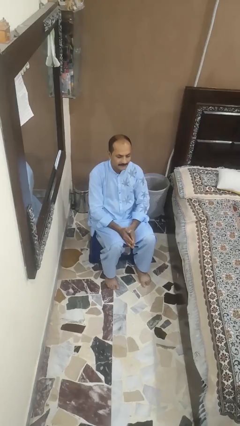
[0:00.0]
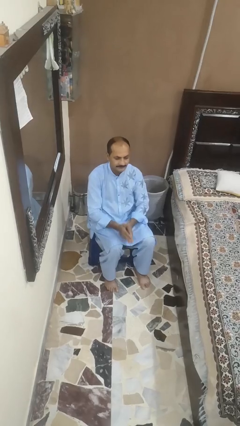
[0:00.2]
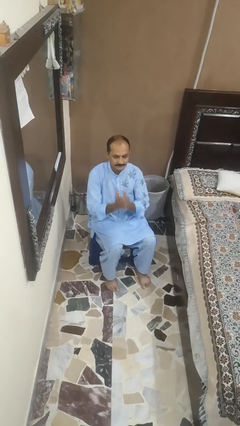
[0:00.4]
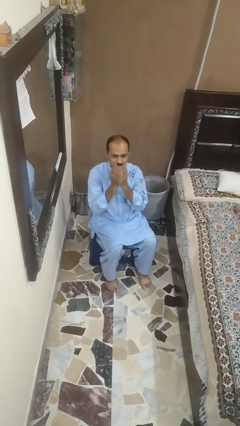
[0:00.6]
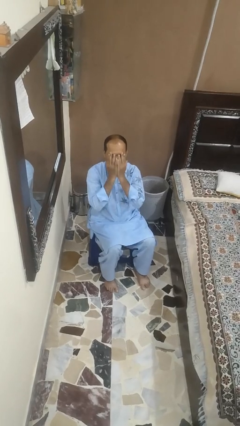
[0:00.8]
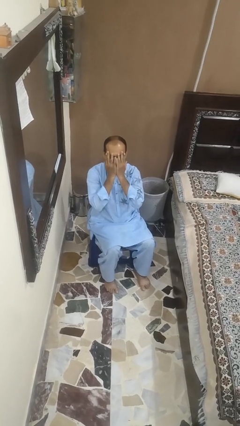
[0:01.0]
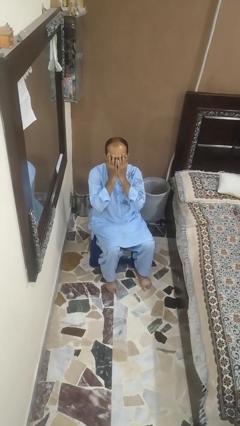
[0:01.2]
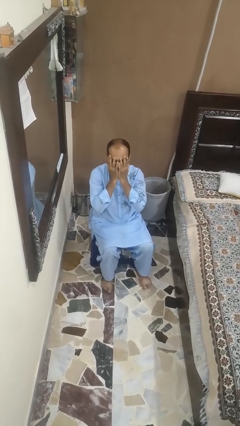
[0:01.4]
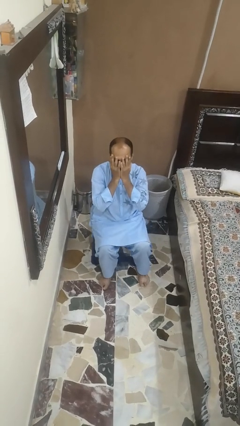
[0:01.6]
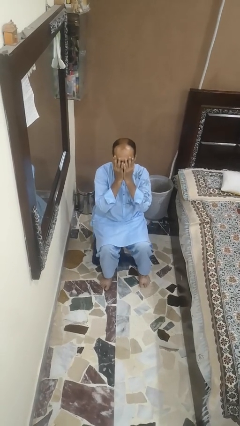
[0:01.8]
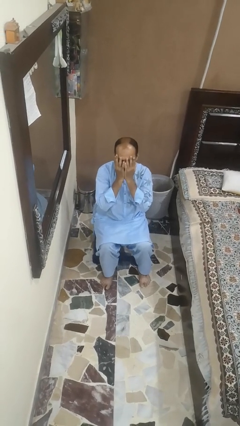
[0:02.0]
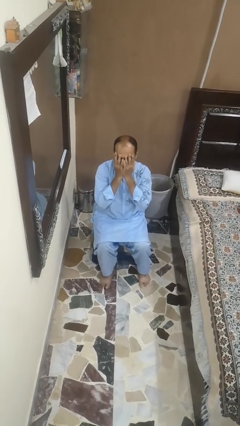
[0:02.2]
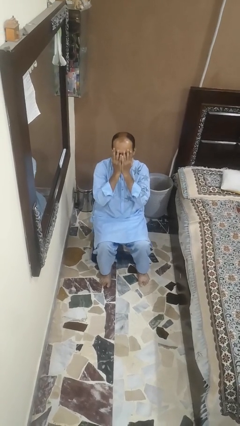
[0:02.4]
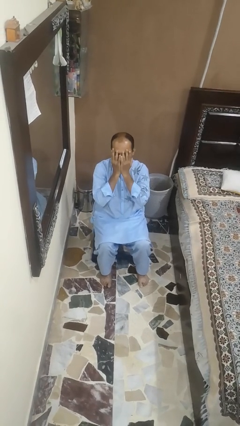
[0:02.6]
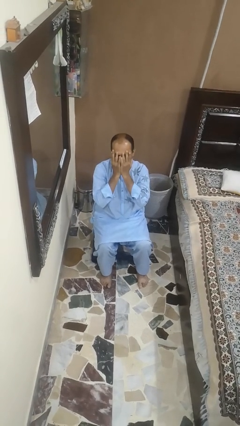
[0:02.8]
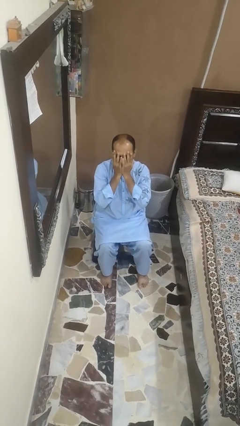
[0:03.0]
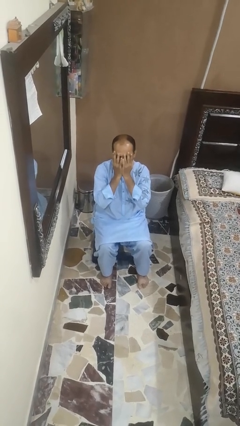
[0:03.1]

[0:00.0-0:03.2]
person covers face with hands

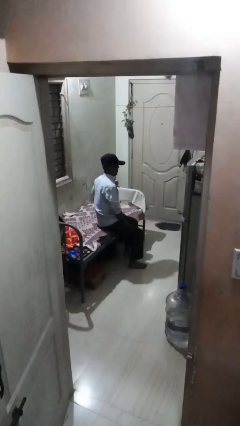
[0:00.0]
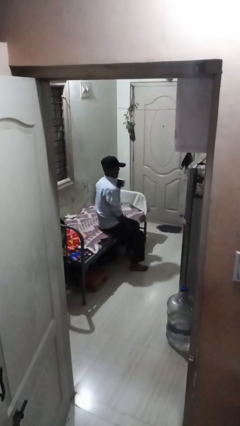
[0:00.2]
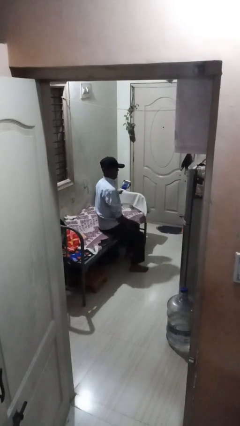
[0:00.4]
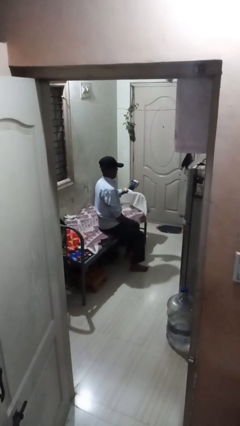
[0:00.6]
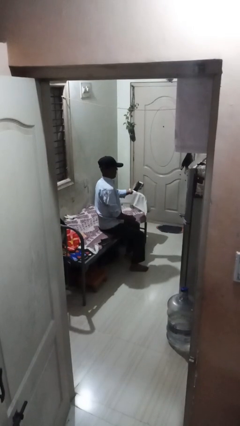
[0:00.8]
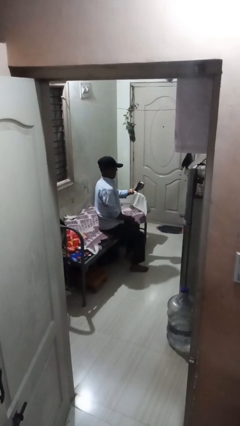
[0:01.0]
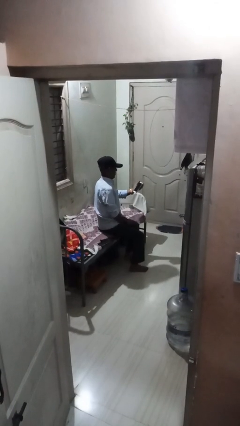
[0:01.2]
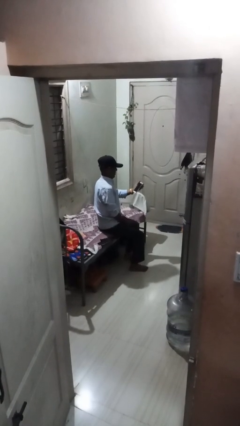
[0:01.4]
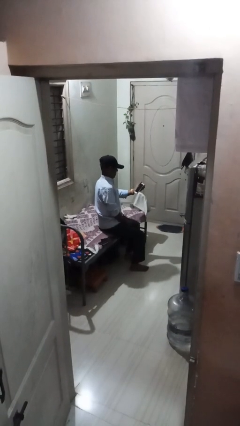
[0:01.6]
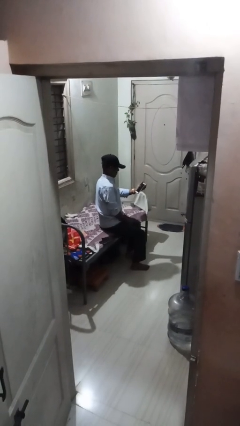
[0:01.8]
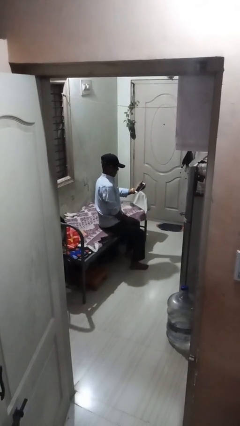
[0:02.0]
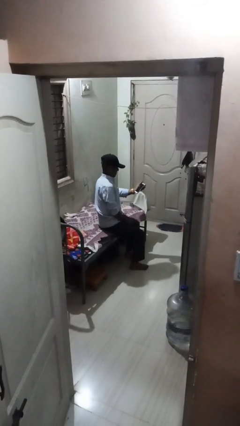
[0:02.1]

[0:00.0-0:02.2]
person takes phone from pocket

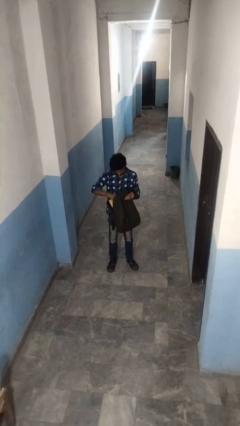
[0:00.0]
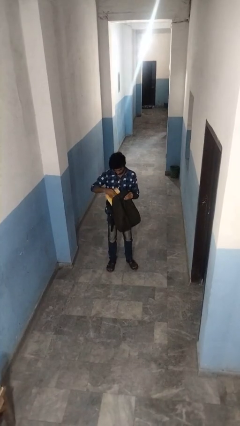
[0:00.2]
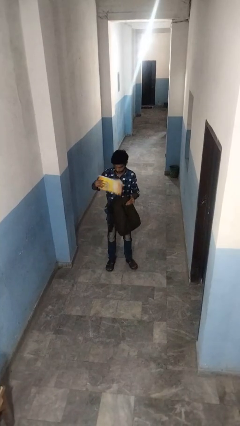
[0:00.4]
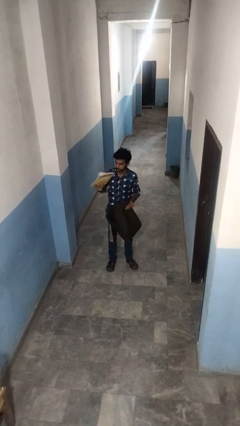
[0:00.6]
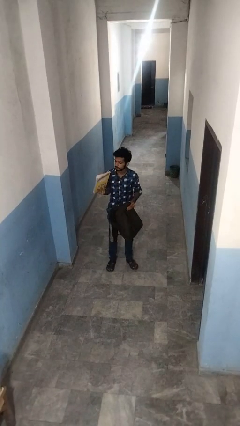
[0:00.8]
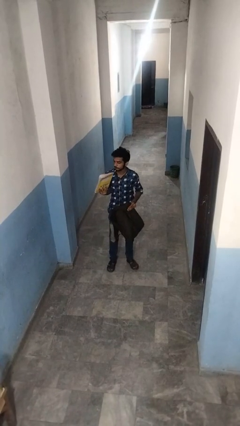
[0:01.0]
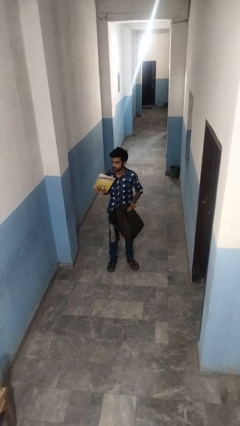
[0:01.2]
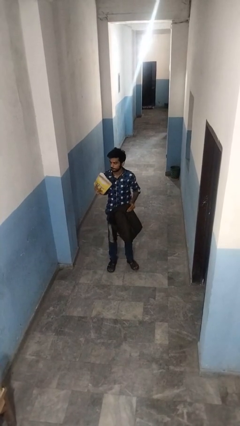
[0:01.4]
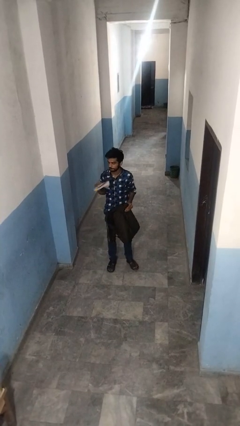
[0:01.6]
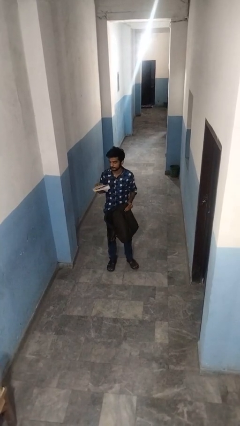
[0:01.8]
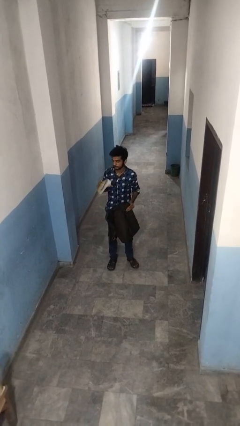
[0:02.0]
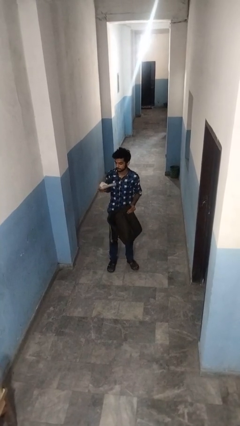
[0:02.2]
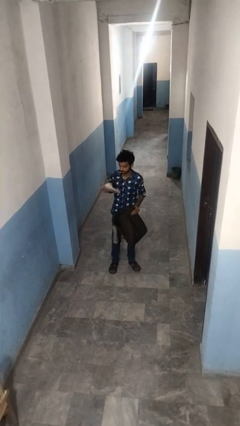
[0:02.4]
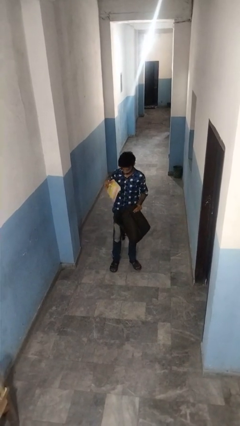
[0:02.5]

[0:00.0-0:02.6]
person takes object from backpack

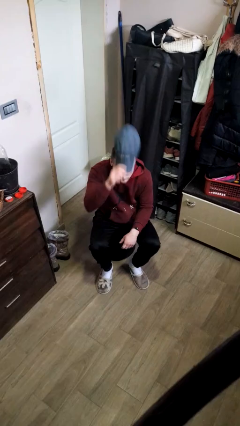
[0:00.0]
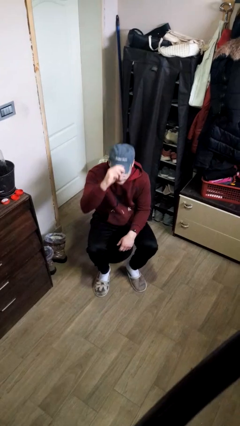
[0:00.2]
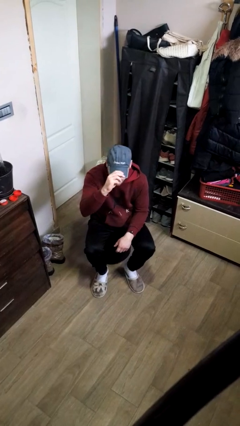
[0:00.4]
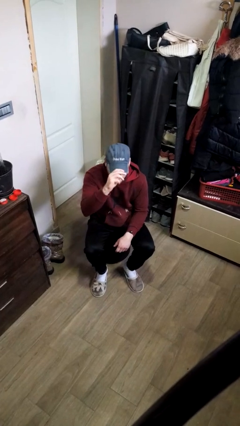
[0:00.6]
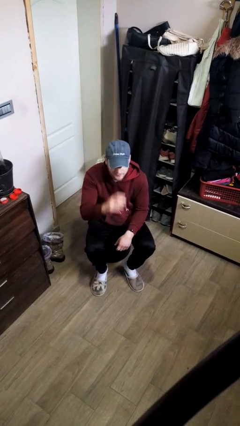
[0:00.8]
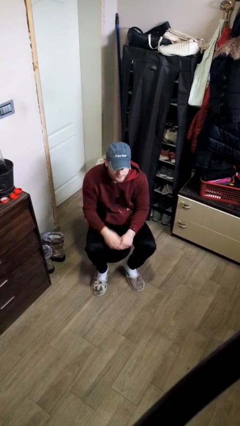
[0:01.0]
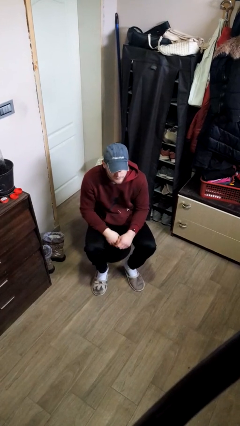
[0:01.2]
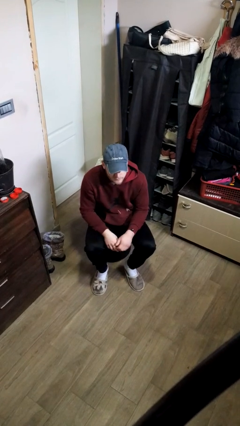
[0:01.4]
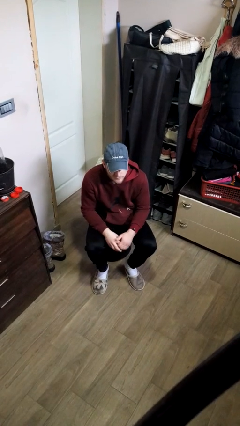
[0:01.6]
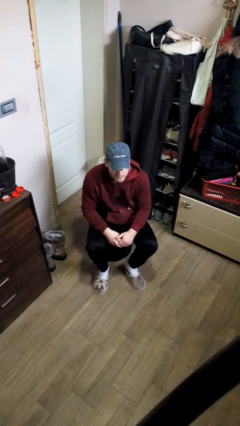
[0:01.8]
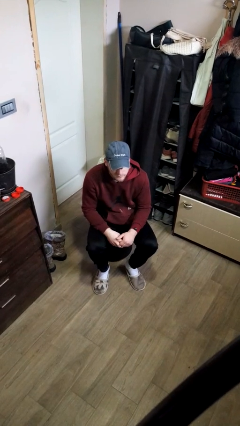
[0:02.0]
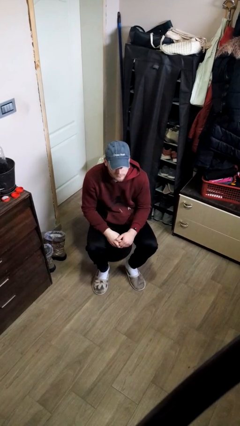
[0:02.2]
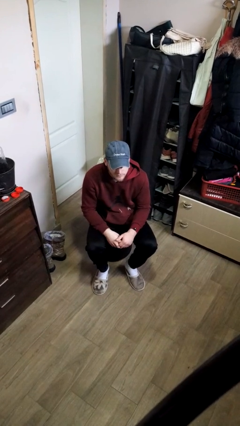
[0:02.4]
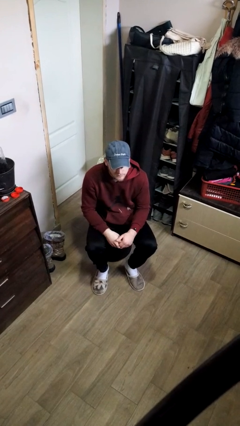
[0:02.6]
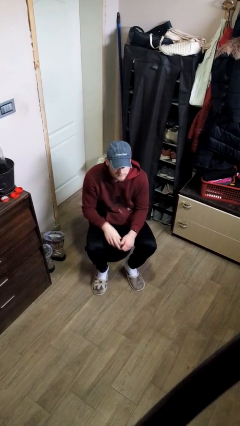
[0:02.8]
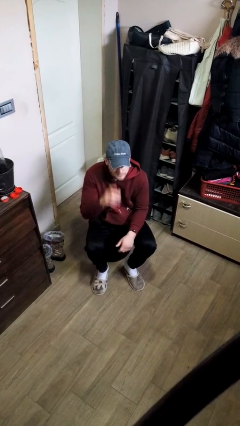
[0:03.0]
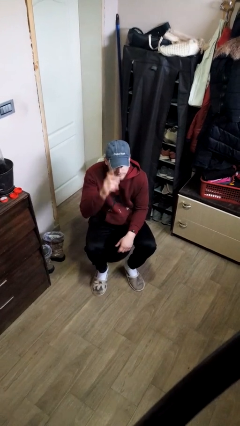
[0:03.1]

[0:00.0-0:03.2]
person puts on hat

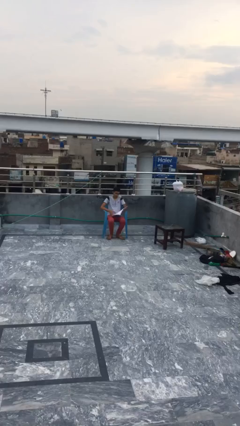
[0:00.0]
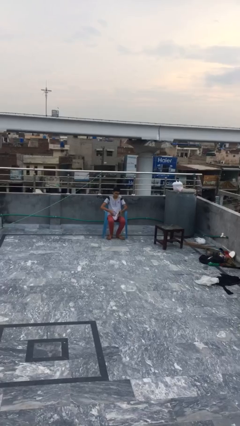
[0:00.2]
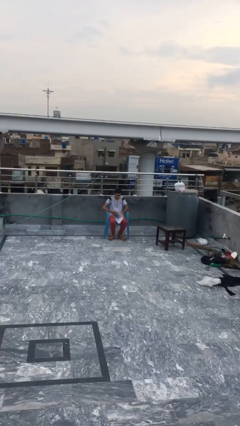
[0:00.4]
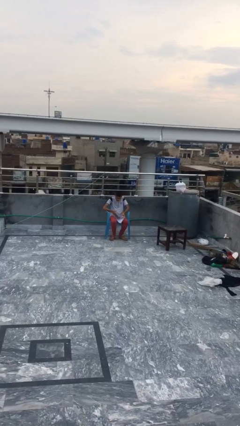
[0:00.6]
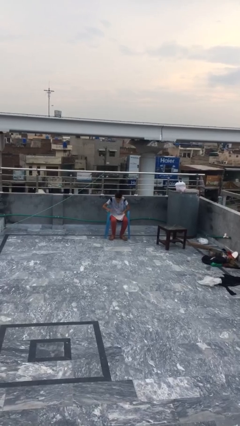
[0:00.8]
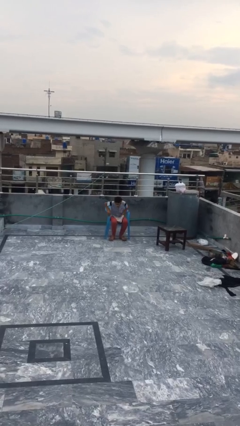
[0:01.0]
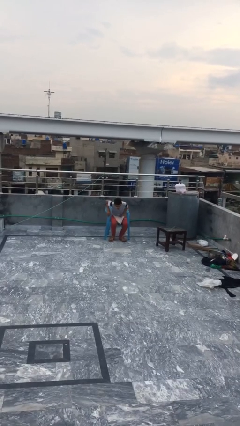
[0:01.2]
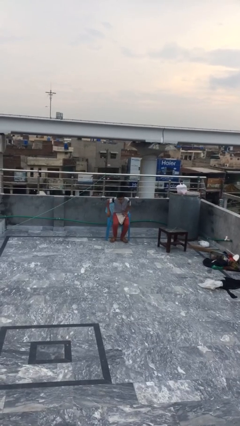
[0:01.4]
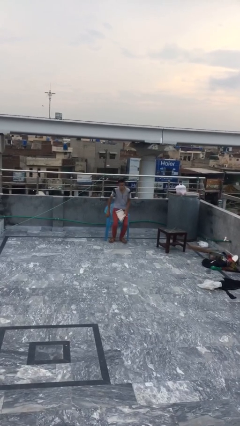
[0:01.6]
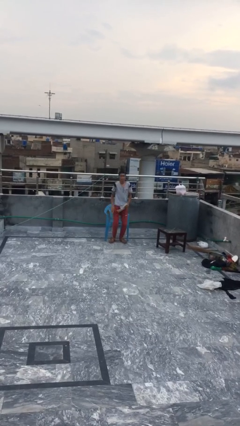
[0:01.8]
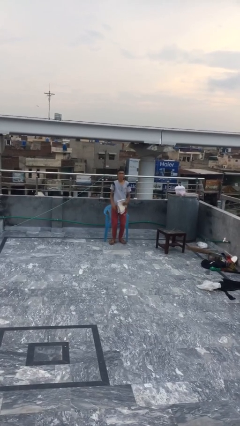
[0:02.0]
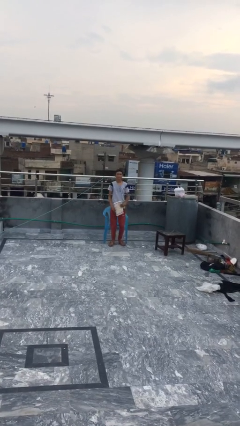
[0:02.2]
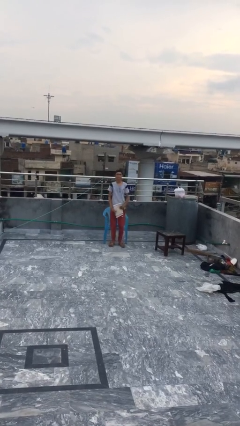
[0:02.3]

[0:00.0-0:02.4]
person stands up

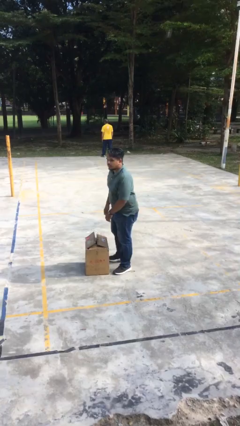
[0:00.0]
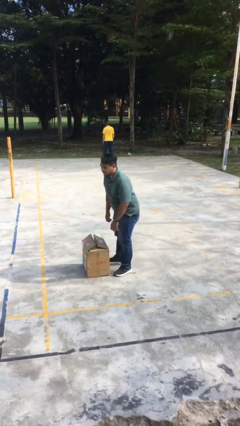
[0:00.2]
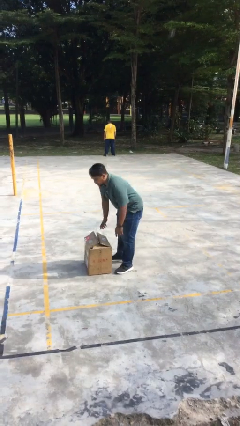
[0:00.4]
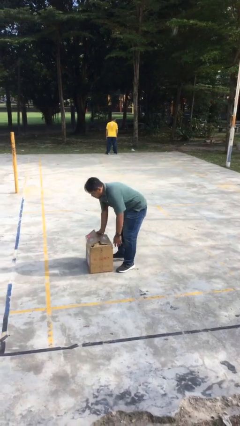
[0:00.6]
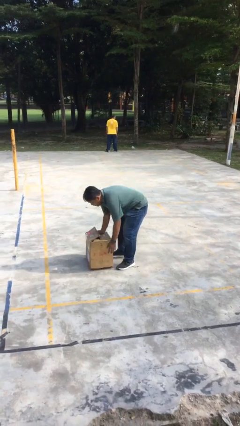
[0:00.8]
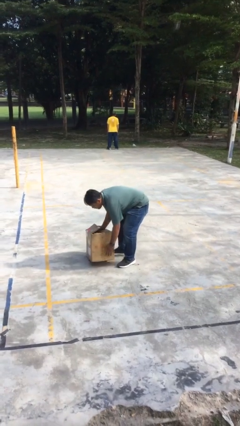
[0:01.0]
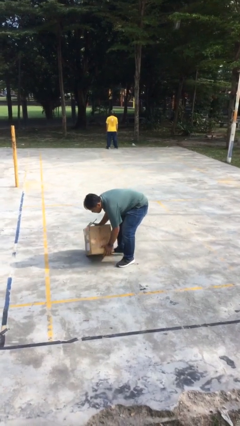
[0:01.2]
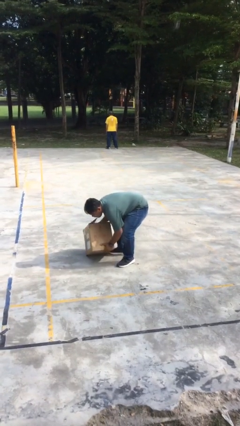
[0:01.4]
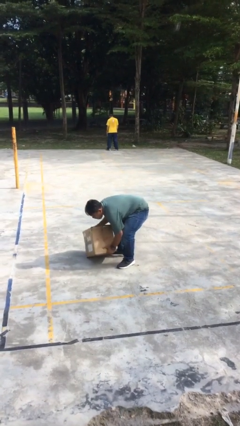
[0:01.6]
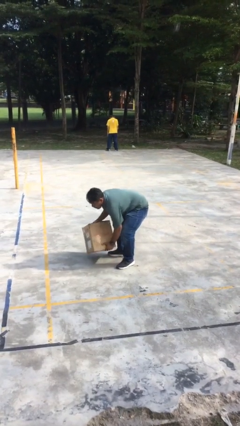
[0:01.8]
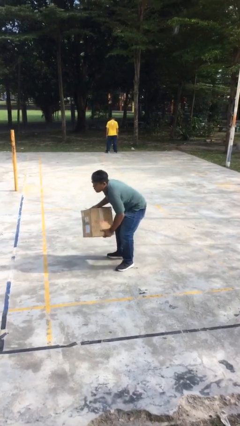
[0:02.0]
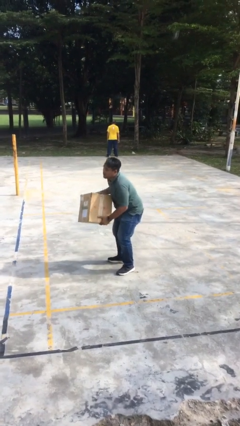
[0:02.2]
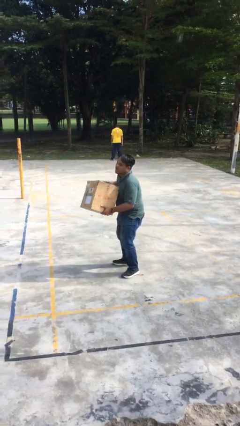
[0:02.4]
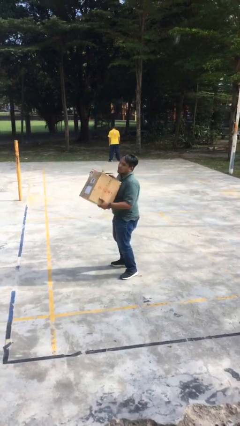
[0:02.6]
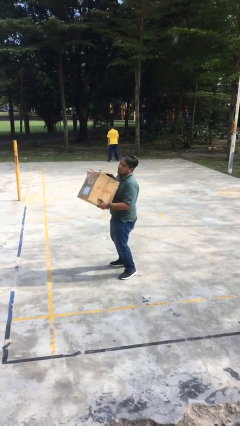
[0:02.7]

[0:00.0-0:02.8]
person picks up object from floor

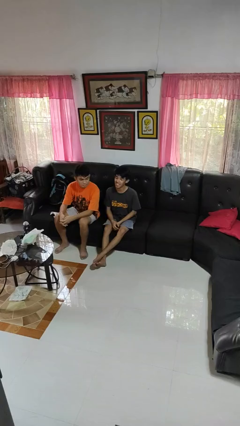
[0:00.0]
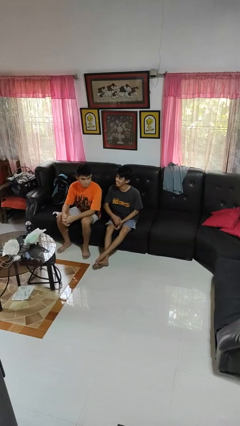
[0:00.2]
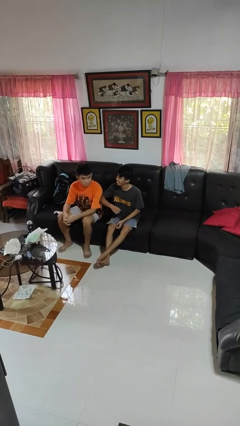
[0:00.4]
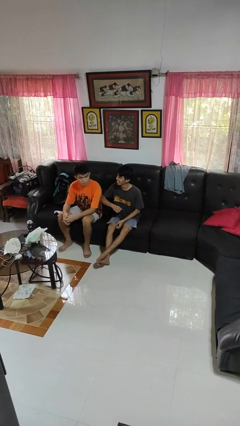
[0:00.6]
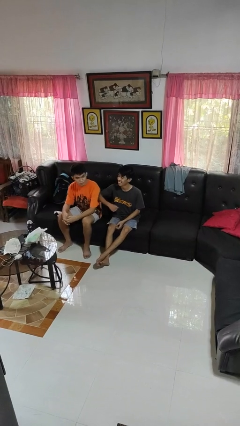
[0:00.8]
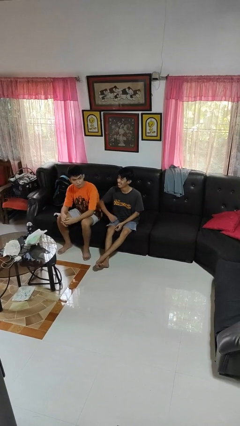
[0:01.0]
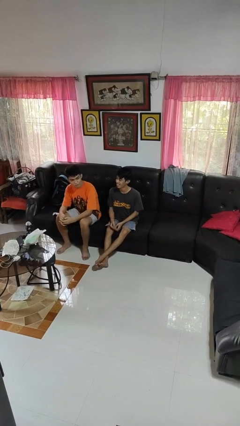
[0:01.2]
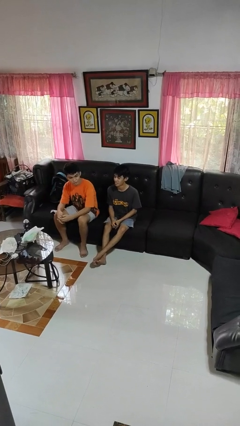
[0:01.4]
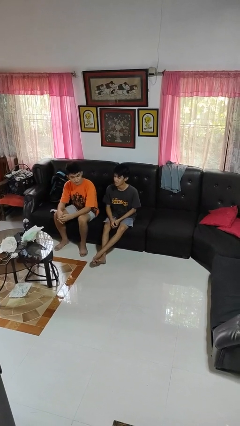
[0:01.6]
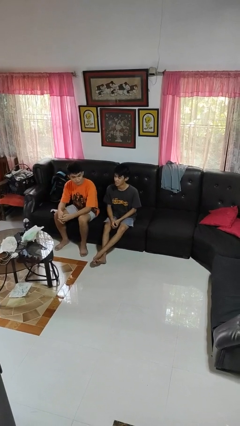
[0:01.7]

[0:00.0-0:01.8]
person nudges person with elbow
